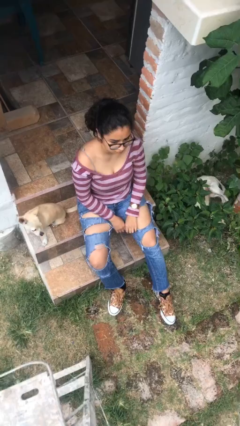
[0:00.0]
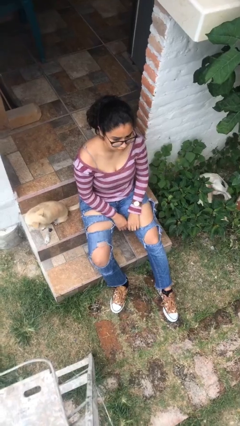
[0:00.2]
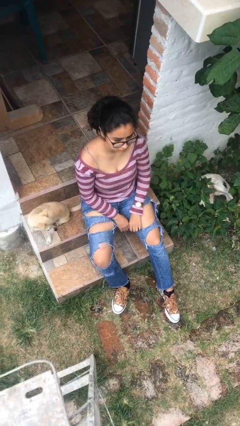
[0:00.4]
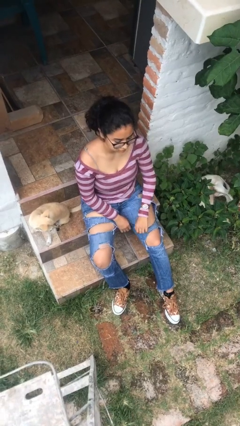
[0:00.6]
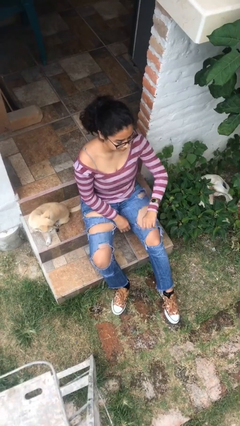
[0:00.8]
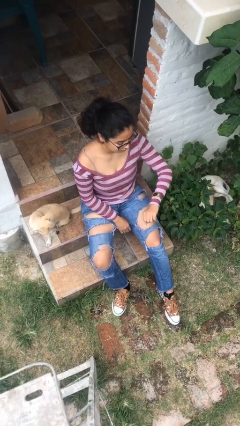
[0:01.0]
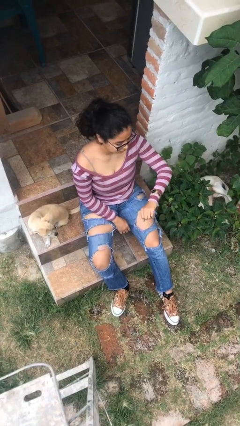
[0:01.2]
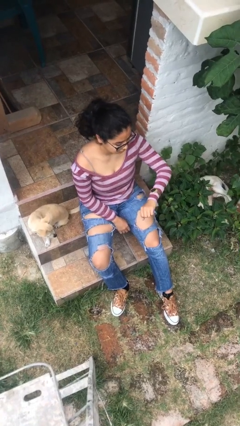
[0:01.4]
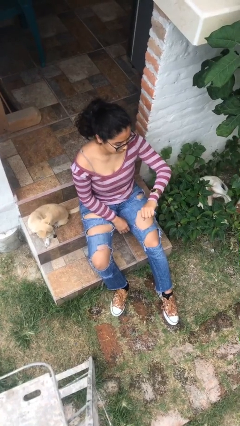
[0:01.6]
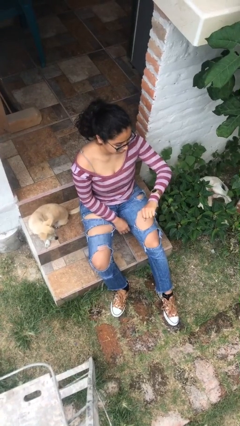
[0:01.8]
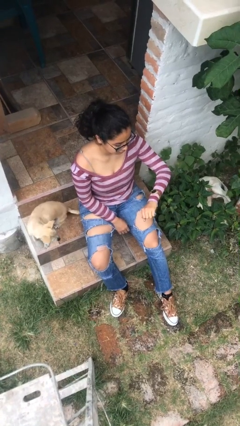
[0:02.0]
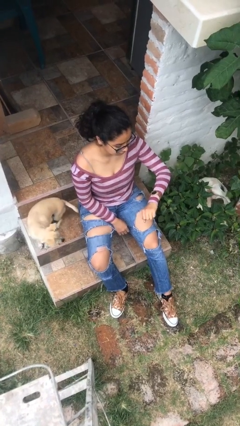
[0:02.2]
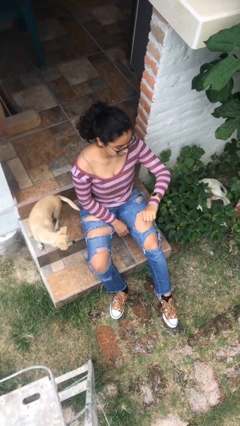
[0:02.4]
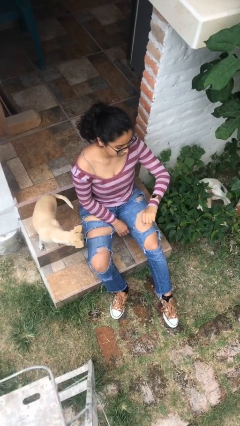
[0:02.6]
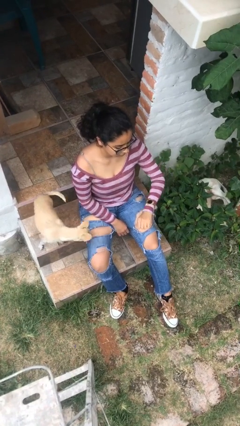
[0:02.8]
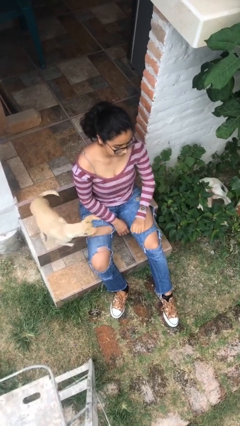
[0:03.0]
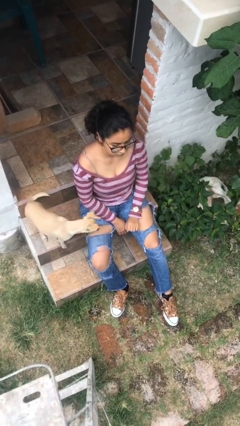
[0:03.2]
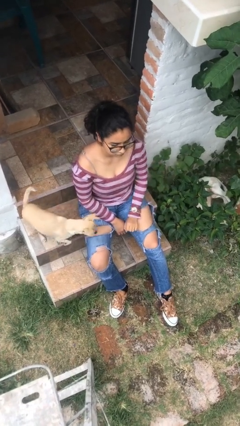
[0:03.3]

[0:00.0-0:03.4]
person looks at wristwatch

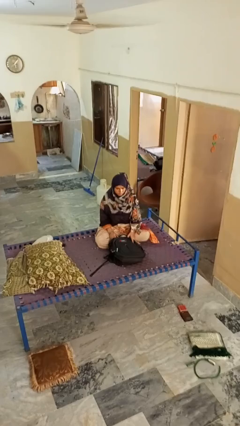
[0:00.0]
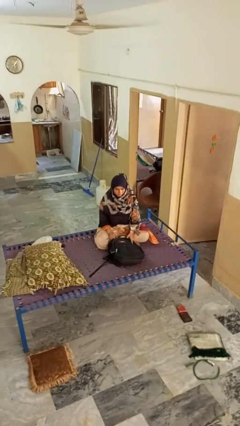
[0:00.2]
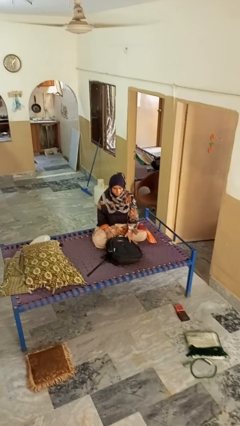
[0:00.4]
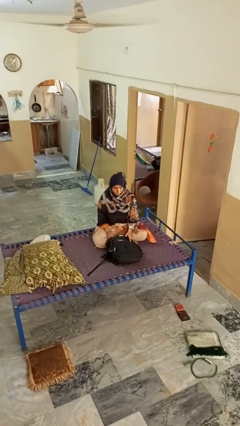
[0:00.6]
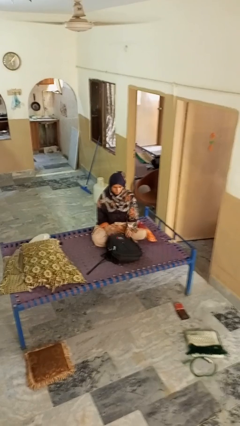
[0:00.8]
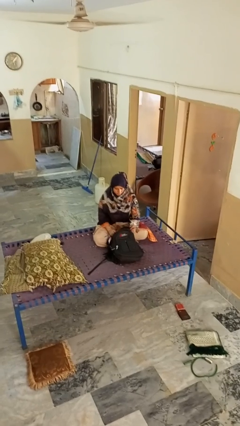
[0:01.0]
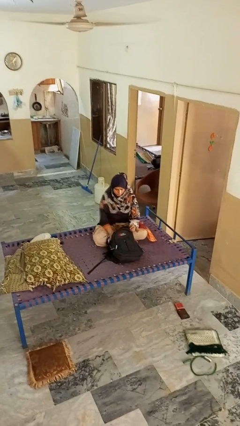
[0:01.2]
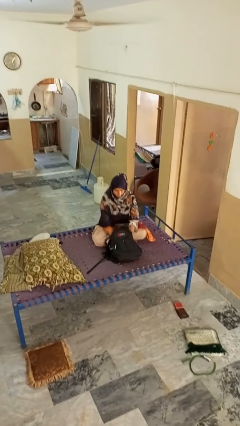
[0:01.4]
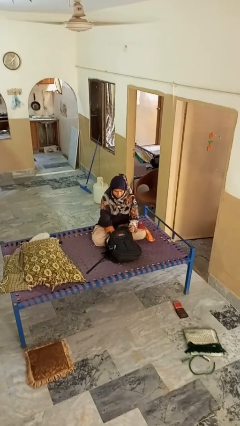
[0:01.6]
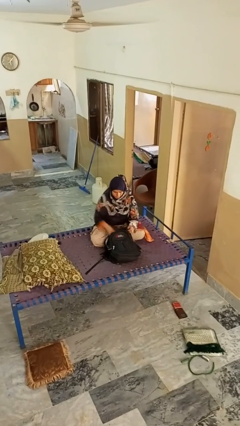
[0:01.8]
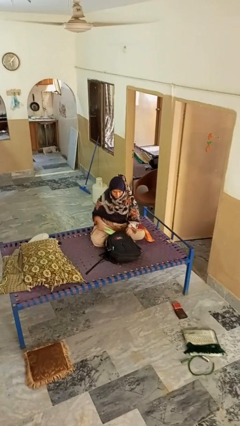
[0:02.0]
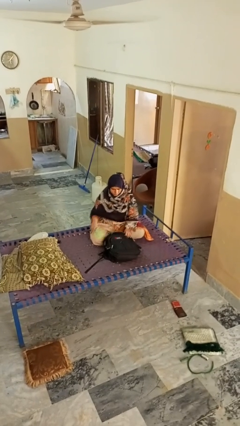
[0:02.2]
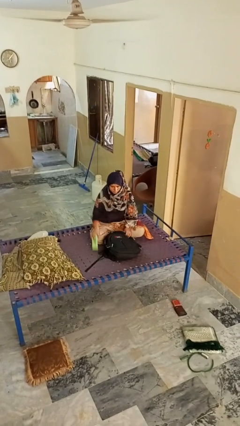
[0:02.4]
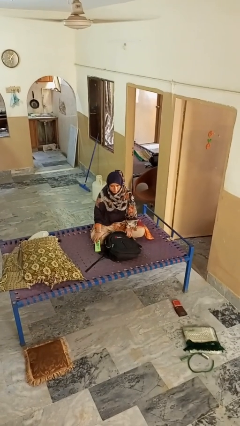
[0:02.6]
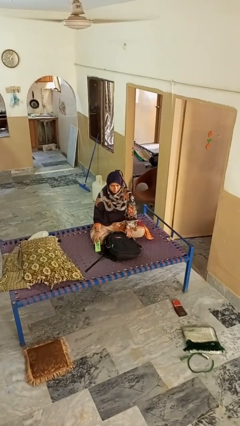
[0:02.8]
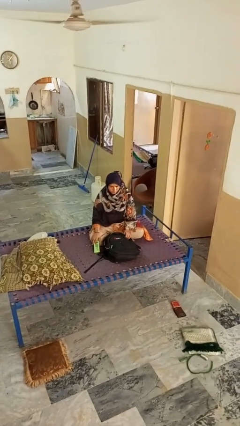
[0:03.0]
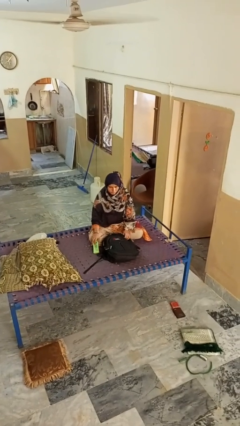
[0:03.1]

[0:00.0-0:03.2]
person takes object from bag

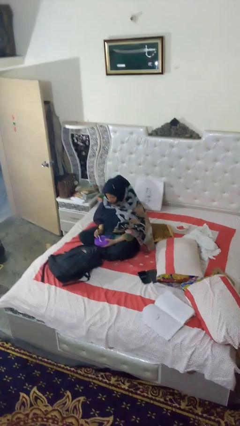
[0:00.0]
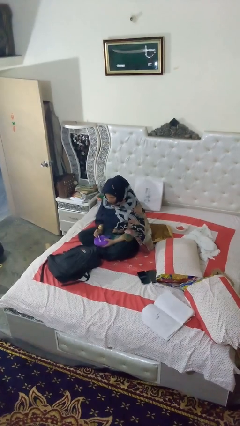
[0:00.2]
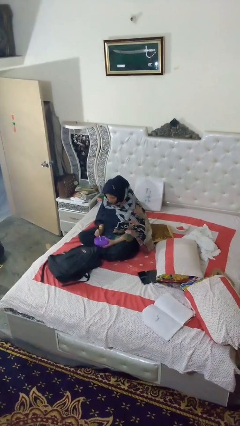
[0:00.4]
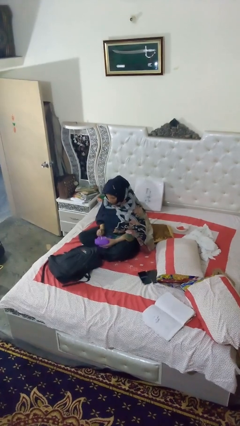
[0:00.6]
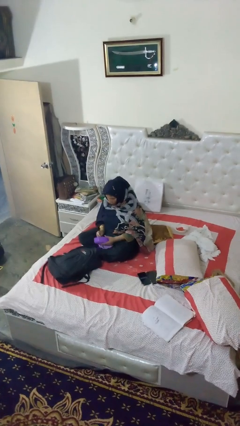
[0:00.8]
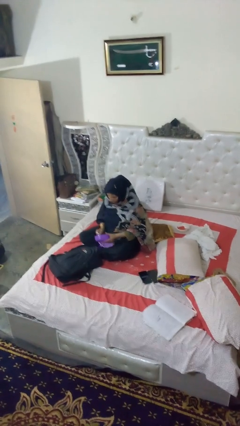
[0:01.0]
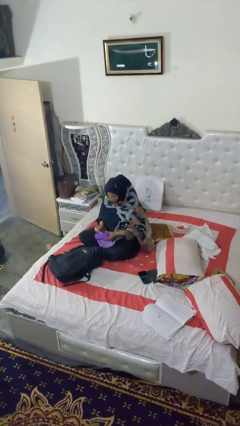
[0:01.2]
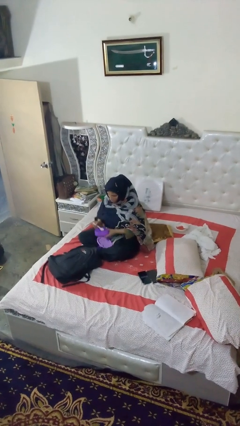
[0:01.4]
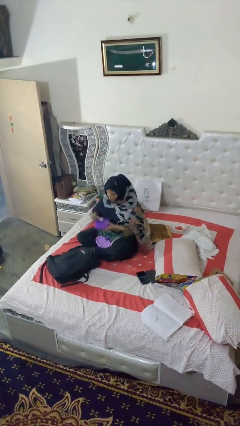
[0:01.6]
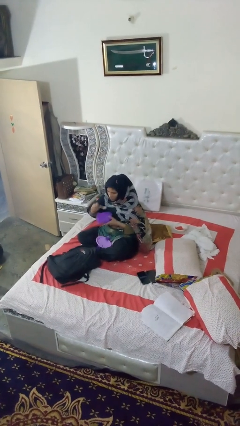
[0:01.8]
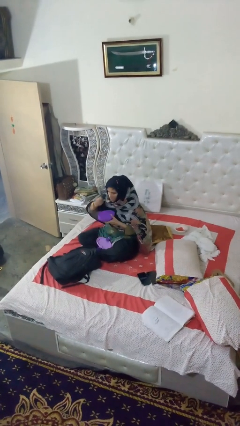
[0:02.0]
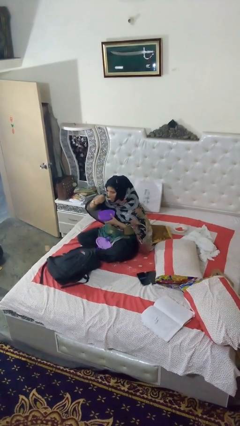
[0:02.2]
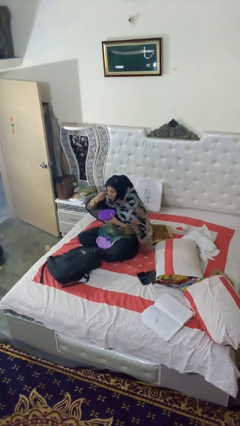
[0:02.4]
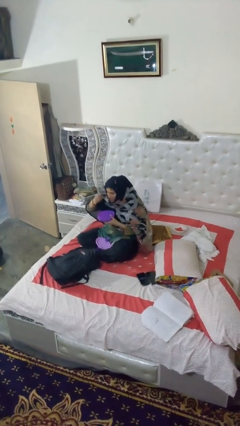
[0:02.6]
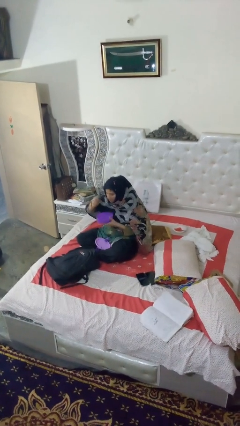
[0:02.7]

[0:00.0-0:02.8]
person eats snack from bag

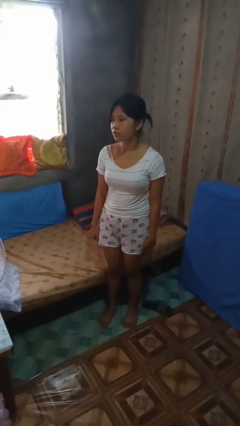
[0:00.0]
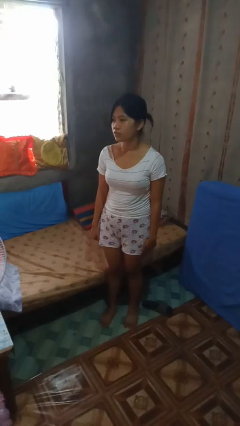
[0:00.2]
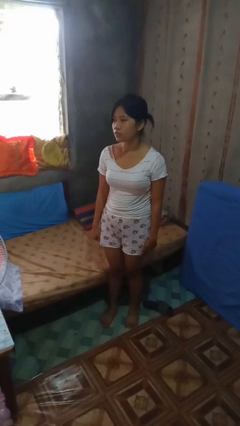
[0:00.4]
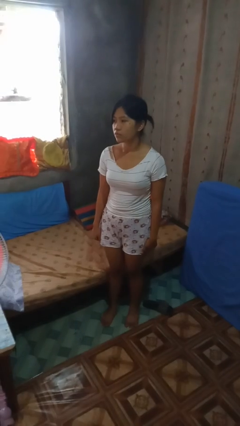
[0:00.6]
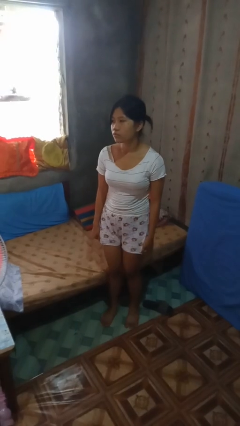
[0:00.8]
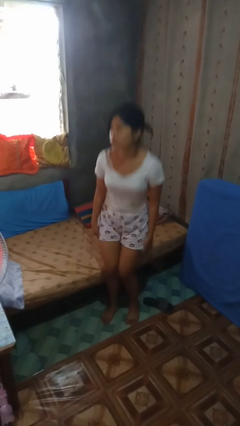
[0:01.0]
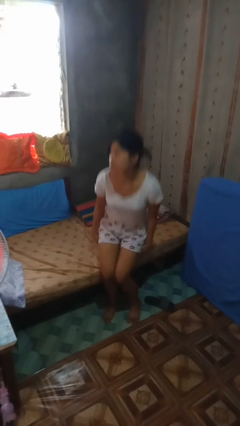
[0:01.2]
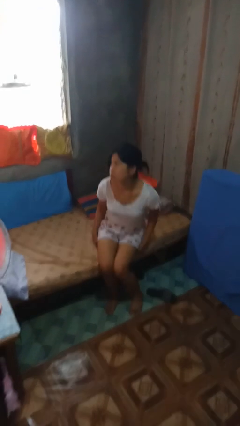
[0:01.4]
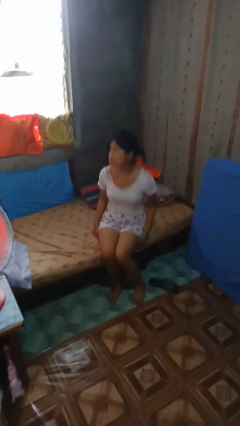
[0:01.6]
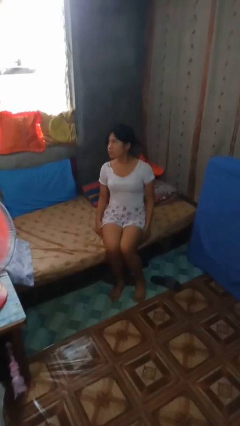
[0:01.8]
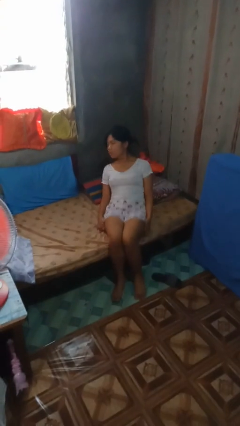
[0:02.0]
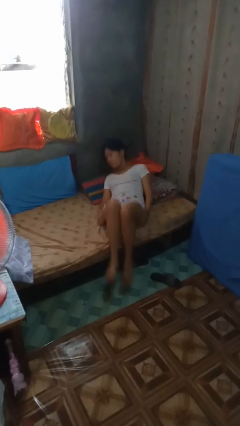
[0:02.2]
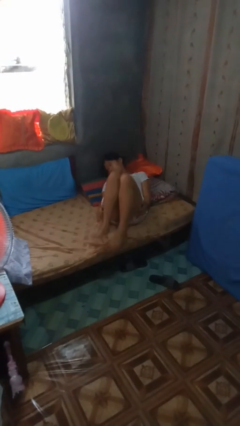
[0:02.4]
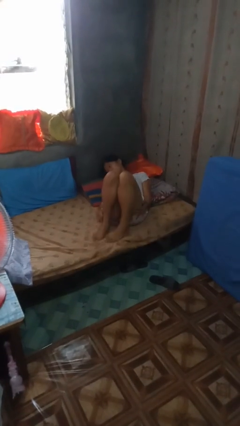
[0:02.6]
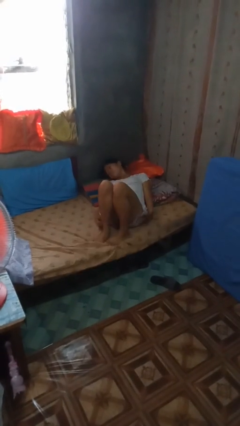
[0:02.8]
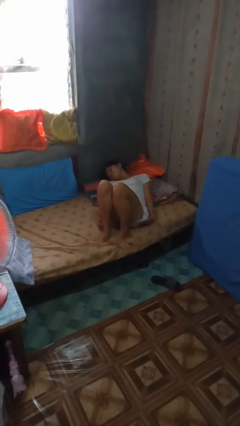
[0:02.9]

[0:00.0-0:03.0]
person lies down on bed

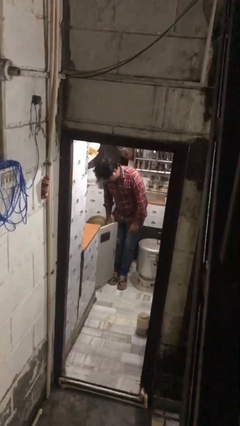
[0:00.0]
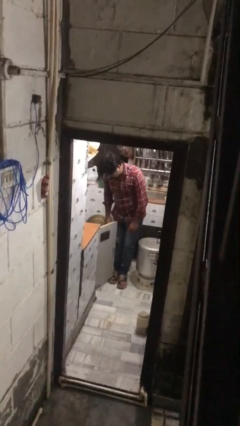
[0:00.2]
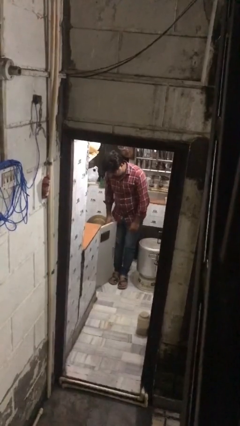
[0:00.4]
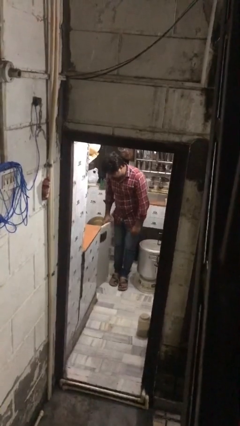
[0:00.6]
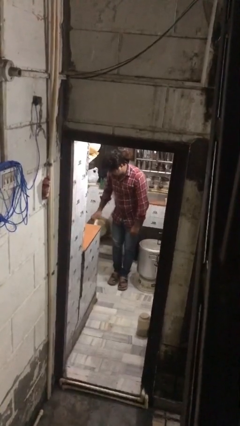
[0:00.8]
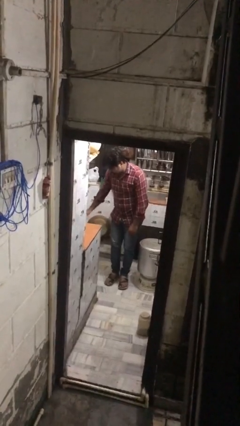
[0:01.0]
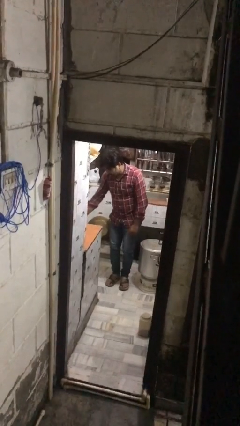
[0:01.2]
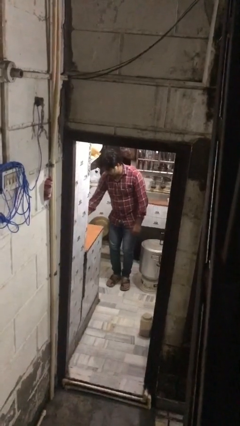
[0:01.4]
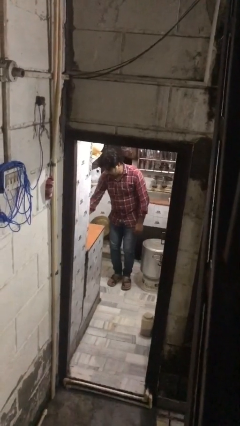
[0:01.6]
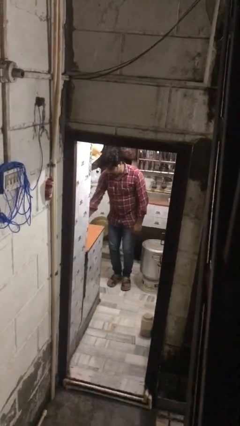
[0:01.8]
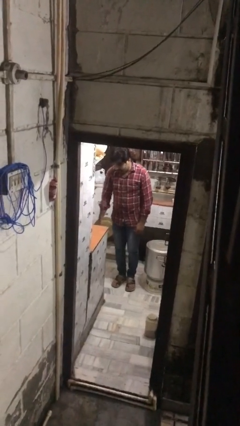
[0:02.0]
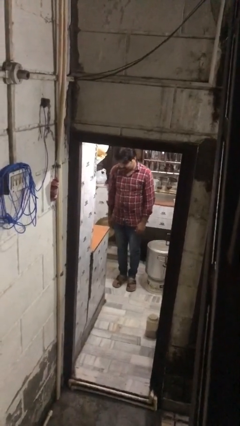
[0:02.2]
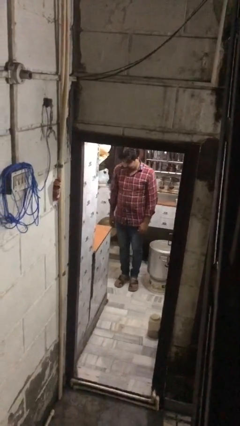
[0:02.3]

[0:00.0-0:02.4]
person closes kitchen drawer

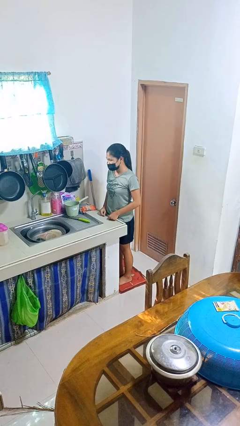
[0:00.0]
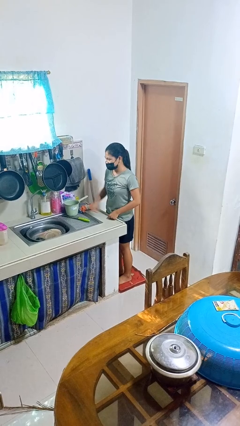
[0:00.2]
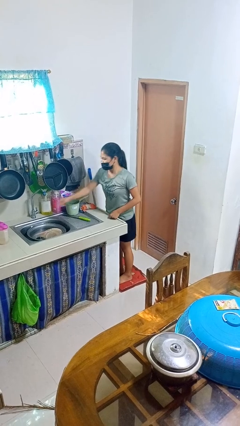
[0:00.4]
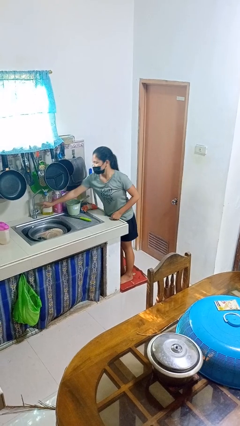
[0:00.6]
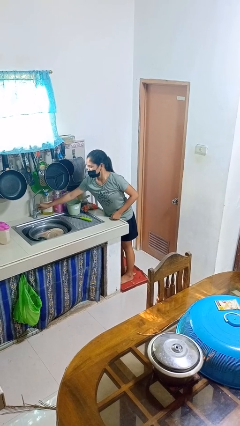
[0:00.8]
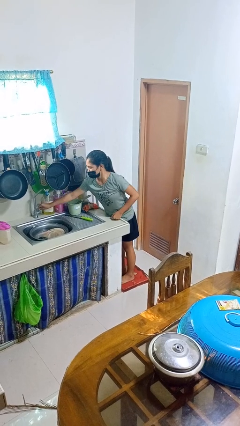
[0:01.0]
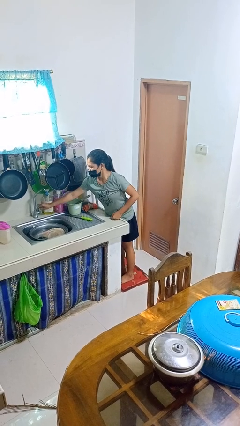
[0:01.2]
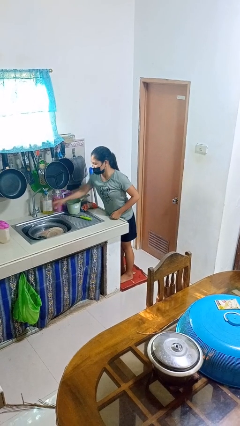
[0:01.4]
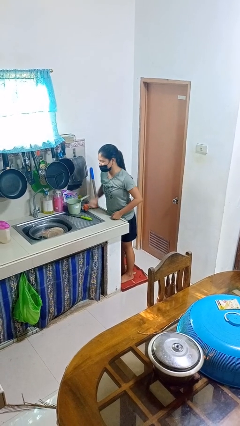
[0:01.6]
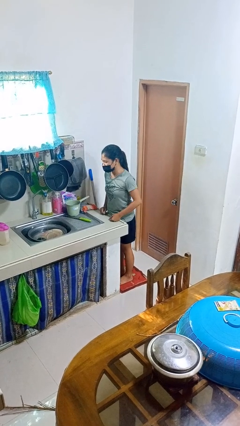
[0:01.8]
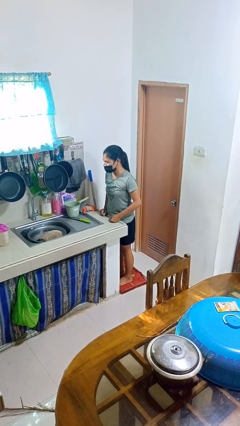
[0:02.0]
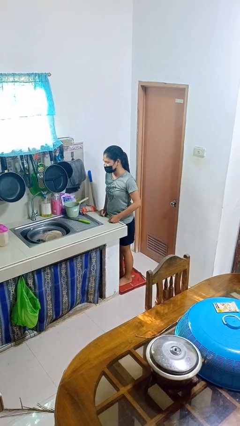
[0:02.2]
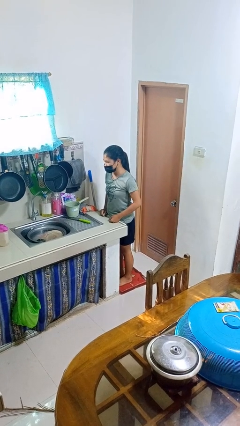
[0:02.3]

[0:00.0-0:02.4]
person turns on faucet

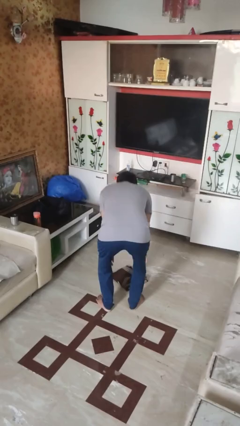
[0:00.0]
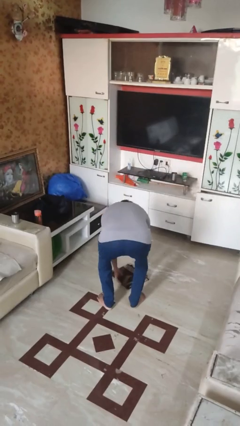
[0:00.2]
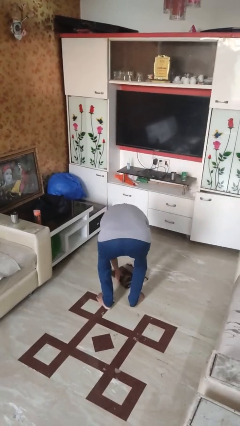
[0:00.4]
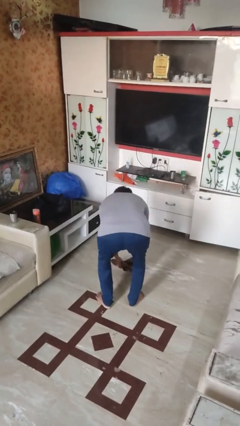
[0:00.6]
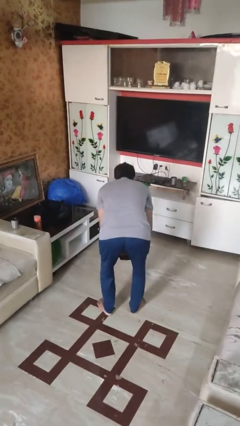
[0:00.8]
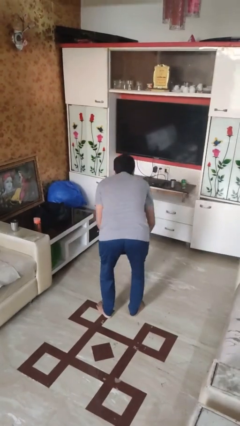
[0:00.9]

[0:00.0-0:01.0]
person picks up object from floor
